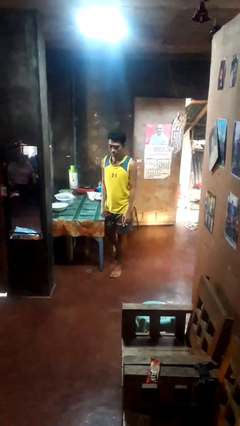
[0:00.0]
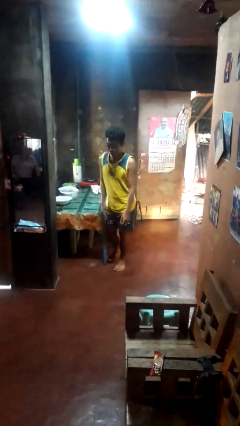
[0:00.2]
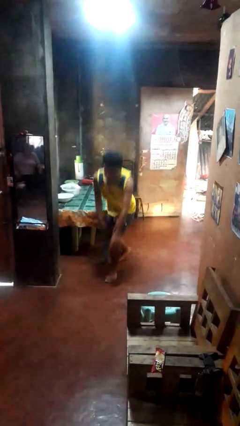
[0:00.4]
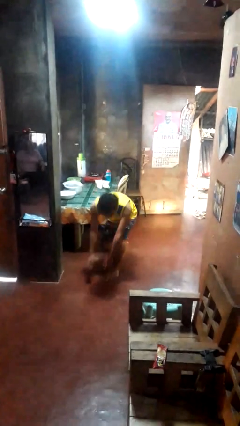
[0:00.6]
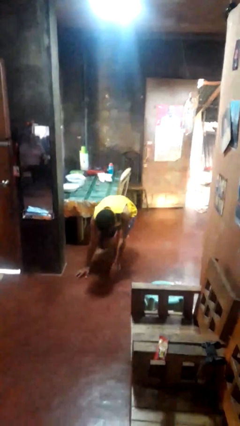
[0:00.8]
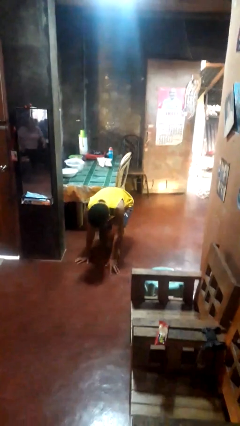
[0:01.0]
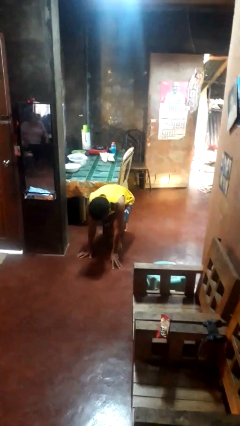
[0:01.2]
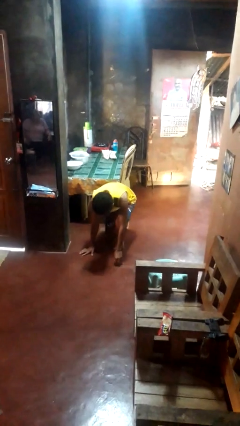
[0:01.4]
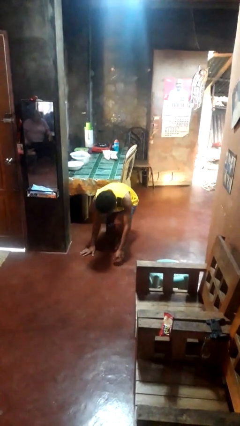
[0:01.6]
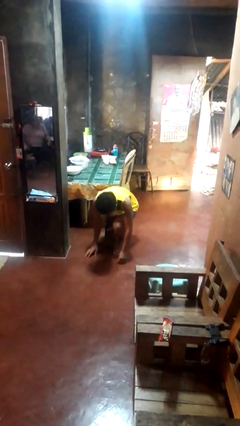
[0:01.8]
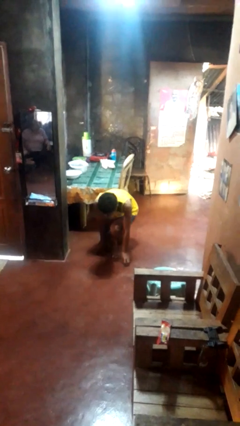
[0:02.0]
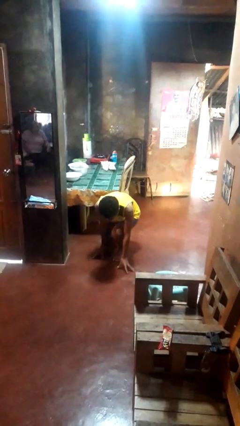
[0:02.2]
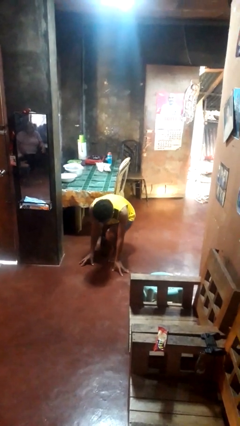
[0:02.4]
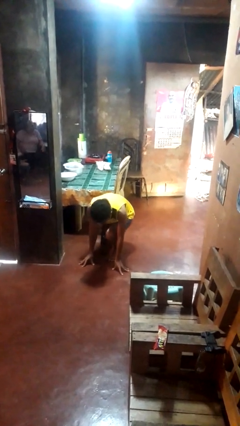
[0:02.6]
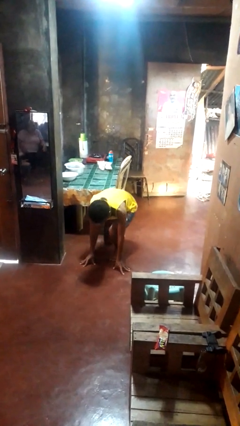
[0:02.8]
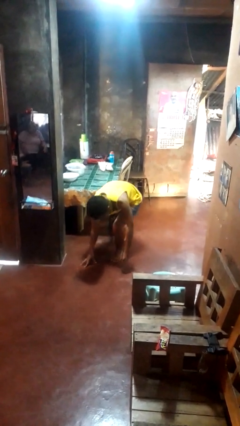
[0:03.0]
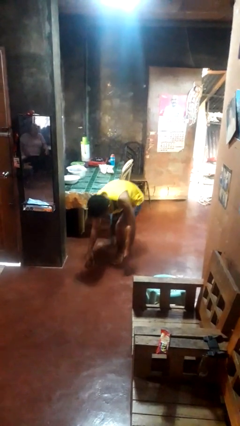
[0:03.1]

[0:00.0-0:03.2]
person trips on object on floor

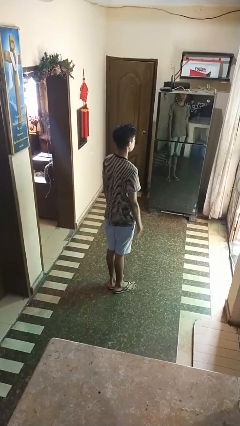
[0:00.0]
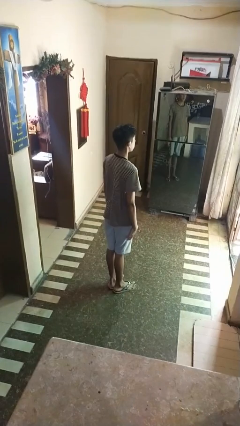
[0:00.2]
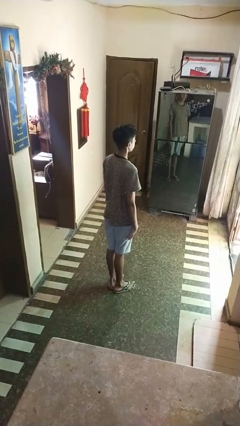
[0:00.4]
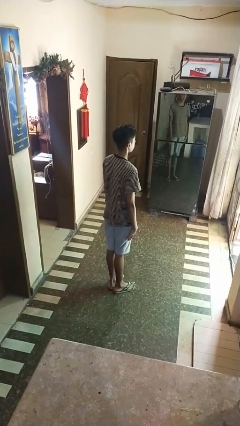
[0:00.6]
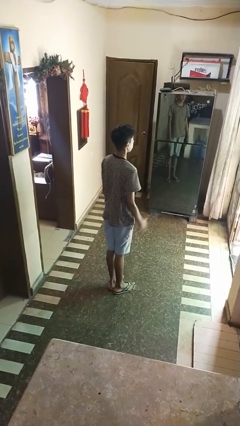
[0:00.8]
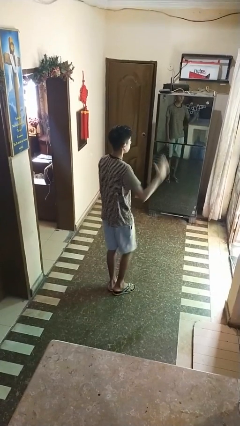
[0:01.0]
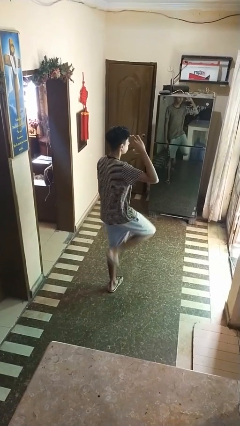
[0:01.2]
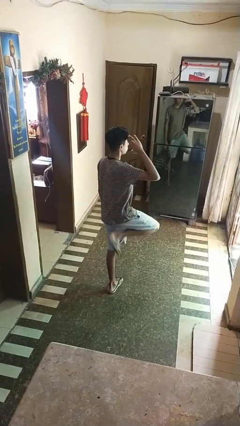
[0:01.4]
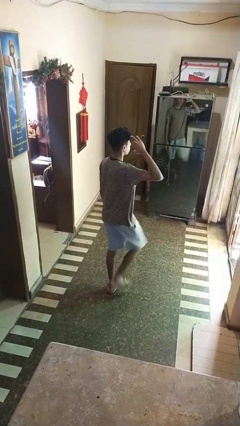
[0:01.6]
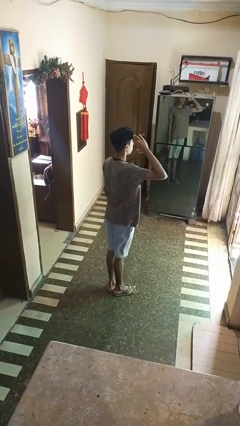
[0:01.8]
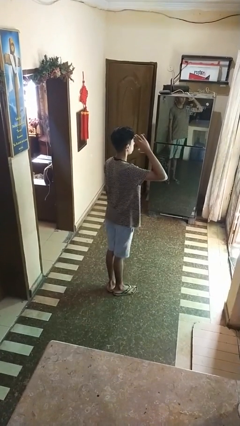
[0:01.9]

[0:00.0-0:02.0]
person salutes

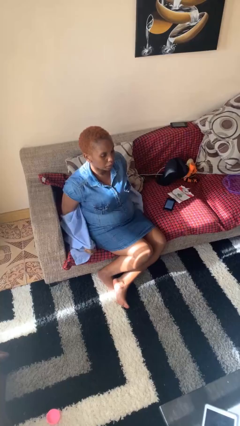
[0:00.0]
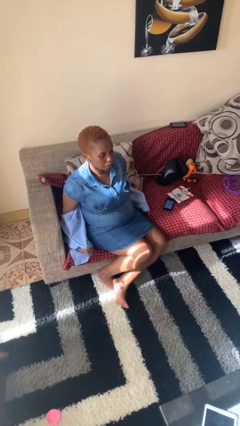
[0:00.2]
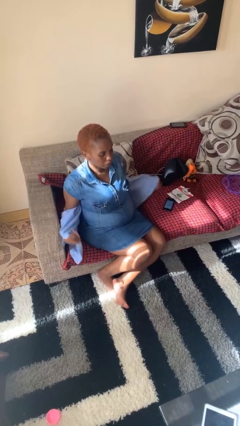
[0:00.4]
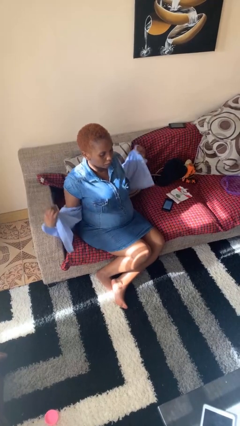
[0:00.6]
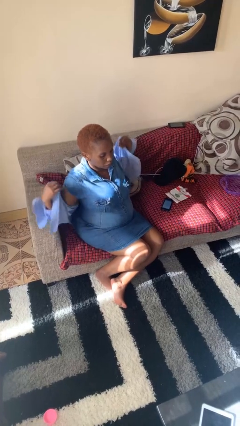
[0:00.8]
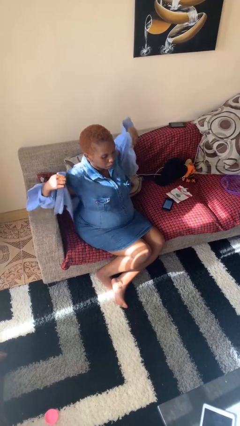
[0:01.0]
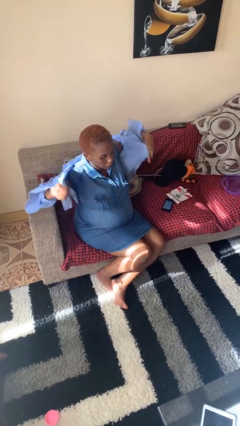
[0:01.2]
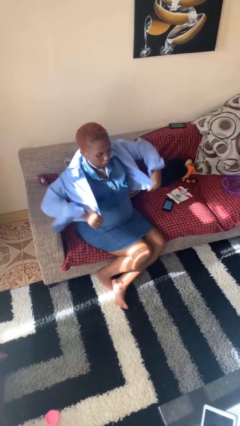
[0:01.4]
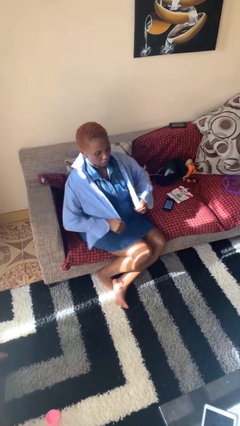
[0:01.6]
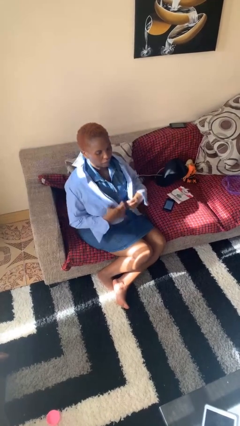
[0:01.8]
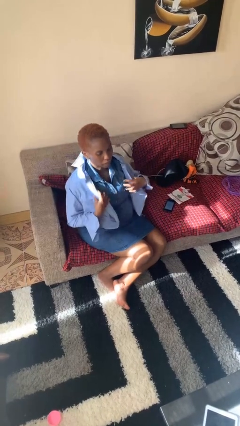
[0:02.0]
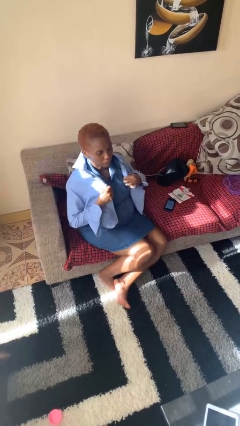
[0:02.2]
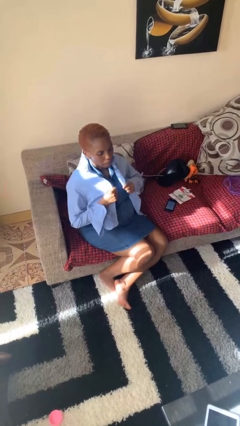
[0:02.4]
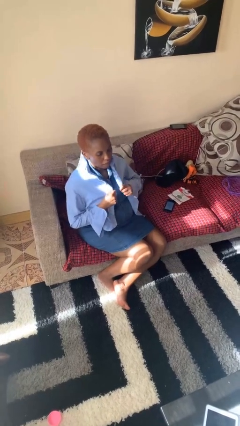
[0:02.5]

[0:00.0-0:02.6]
person puts on shirt

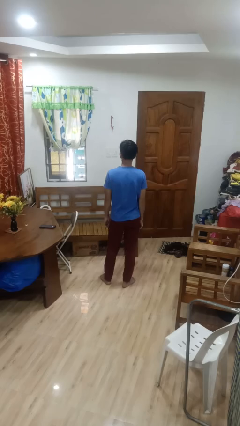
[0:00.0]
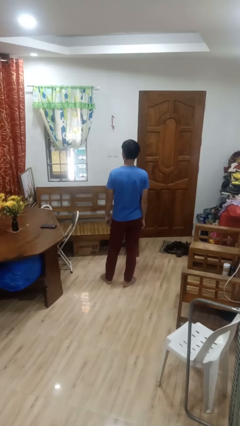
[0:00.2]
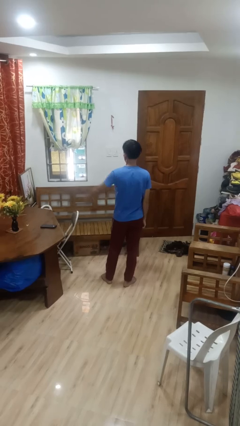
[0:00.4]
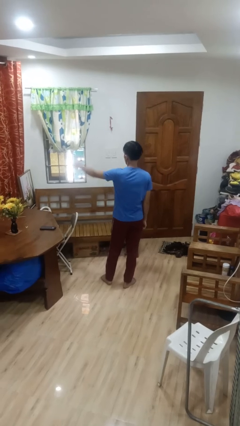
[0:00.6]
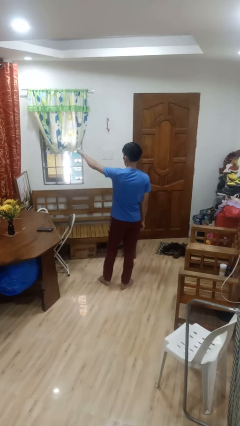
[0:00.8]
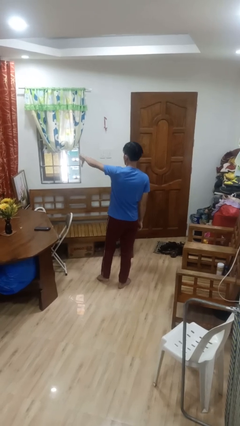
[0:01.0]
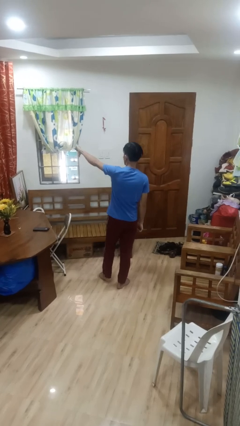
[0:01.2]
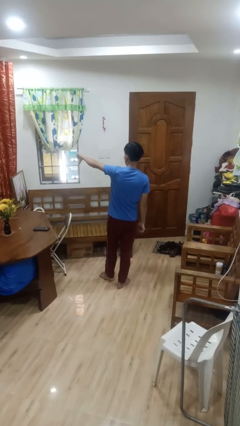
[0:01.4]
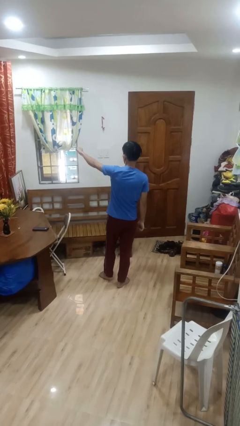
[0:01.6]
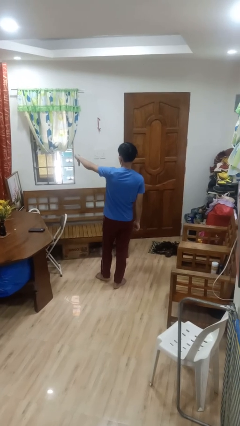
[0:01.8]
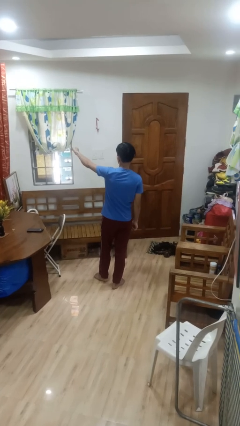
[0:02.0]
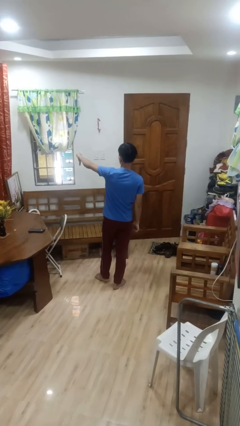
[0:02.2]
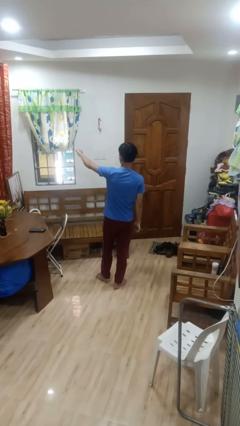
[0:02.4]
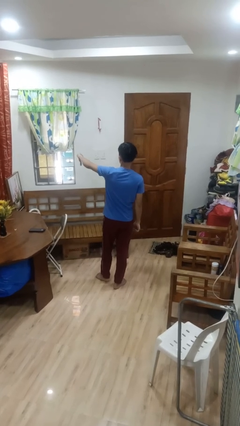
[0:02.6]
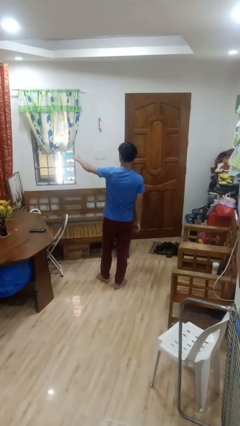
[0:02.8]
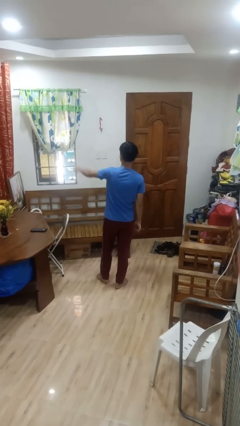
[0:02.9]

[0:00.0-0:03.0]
person gestures thumbs down

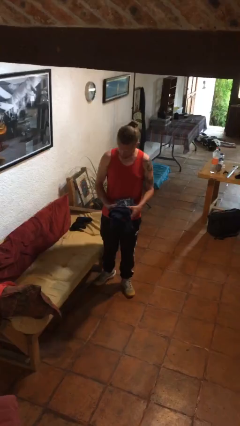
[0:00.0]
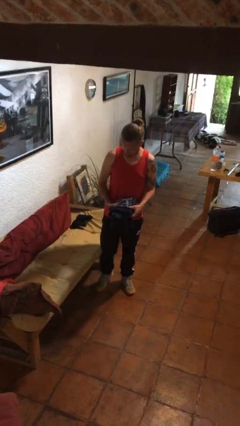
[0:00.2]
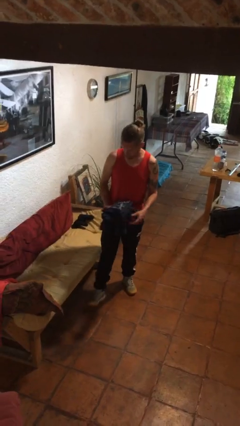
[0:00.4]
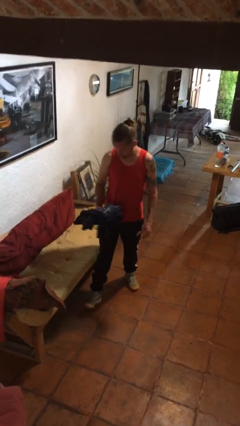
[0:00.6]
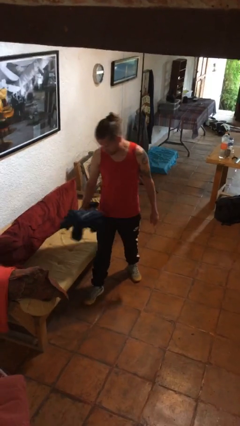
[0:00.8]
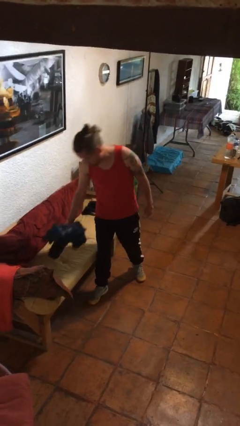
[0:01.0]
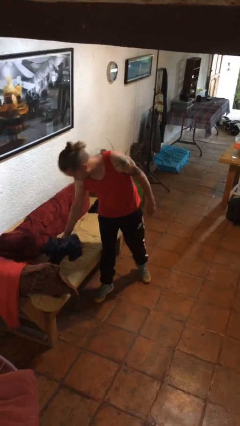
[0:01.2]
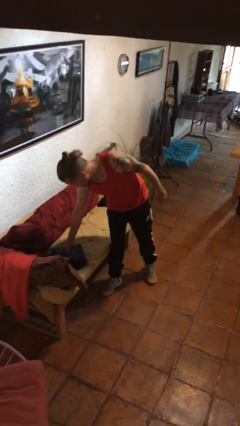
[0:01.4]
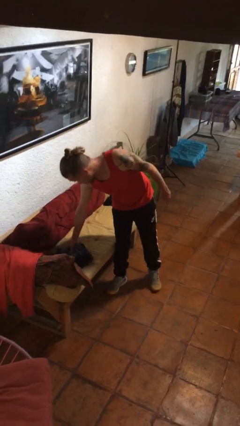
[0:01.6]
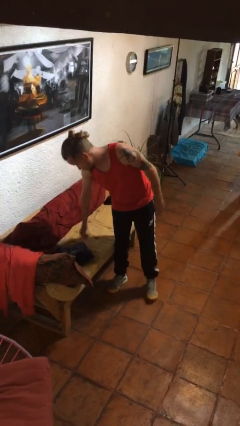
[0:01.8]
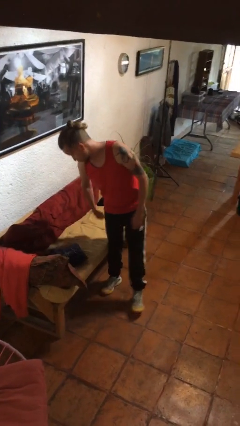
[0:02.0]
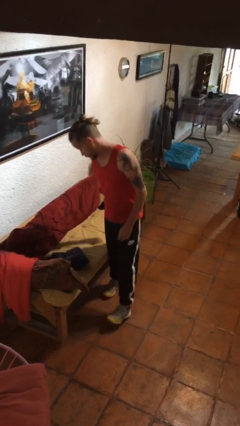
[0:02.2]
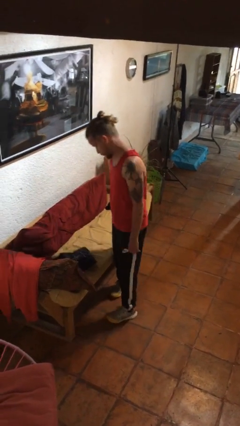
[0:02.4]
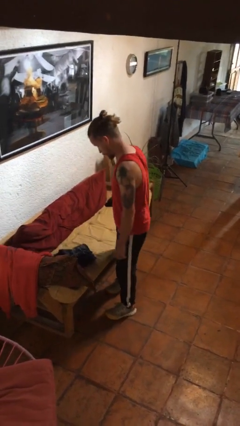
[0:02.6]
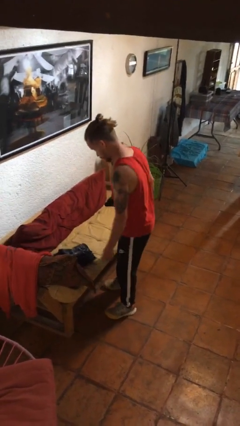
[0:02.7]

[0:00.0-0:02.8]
person puts down object on couch

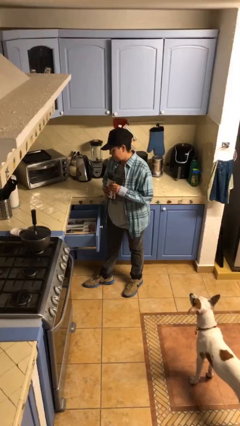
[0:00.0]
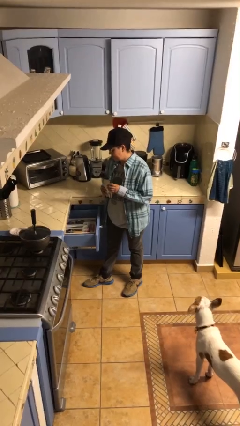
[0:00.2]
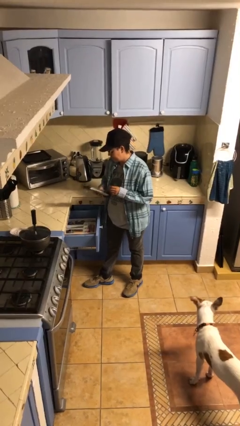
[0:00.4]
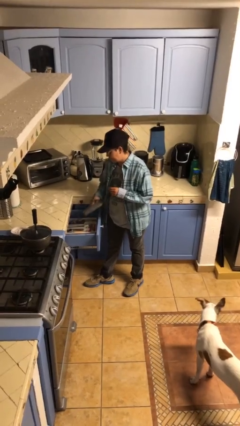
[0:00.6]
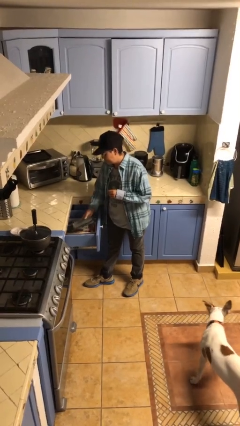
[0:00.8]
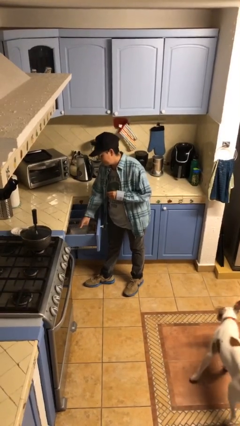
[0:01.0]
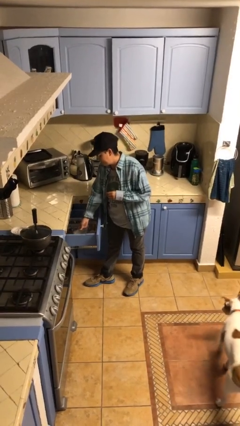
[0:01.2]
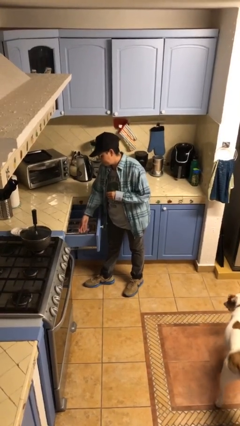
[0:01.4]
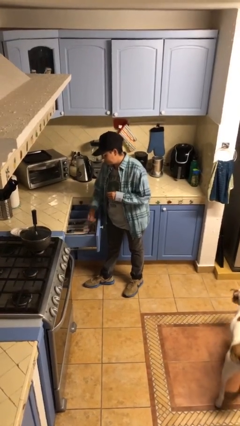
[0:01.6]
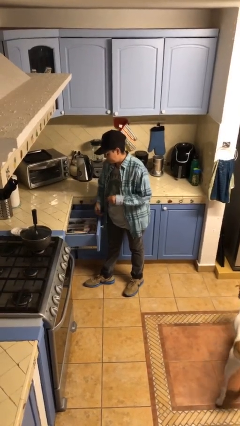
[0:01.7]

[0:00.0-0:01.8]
person puts object into kitchen drawer

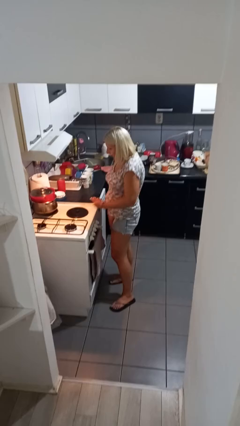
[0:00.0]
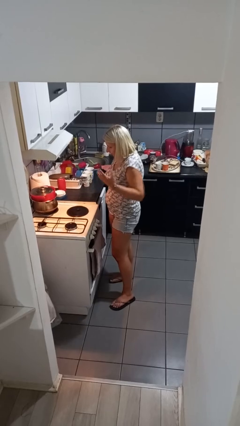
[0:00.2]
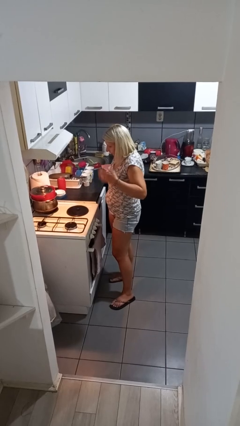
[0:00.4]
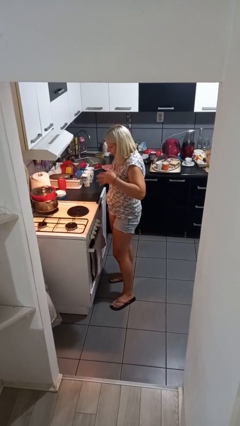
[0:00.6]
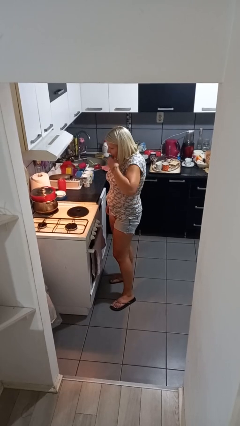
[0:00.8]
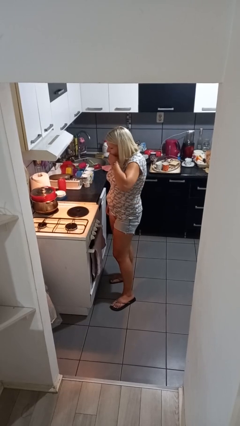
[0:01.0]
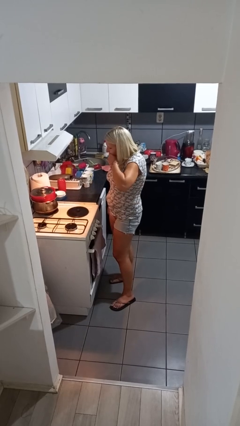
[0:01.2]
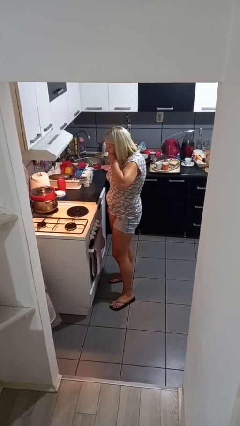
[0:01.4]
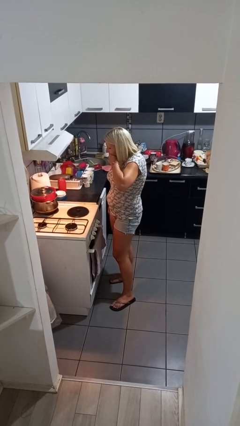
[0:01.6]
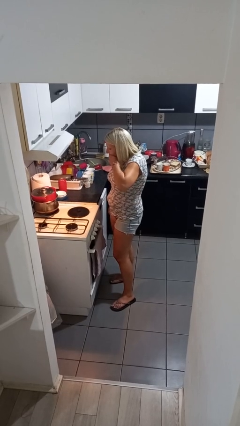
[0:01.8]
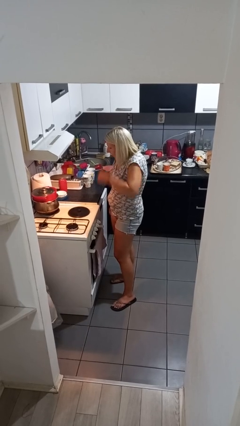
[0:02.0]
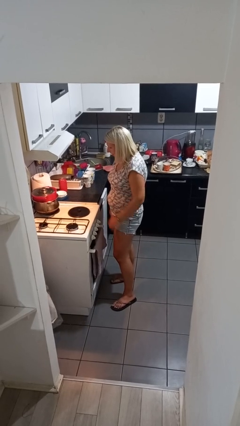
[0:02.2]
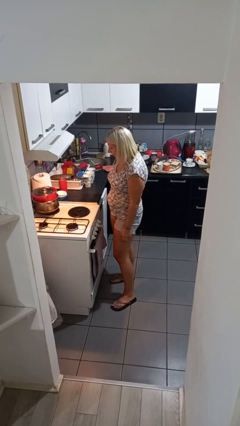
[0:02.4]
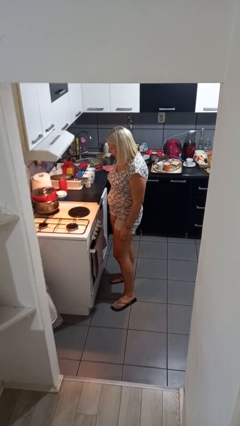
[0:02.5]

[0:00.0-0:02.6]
person burns hand
